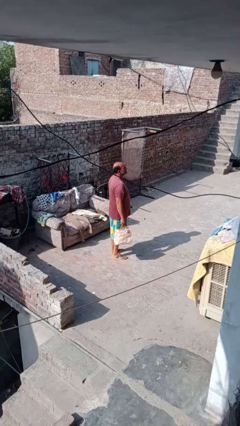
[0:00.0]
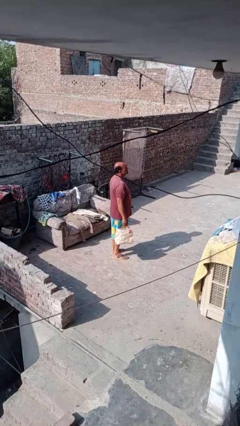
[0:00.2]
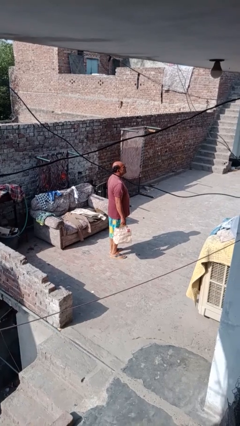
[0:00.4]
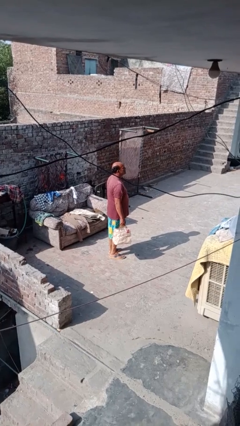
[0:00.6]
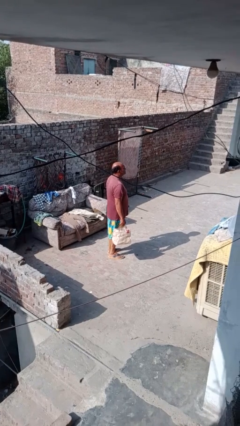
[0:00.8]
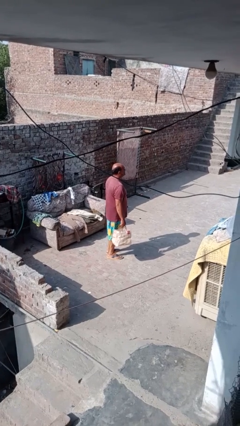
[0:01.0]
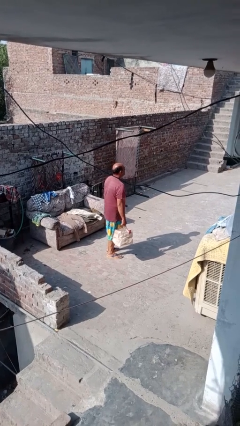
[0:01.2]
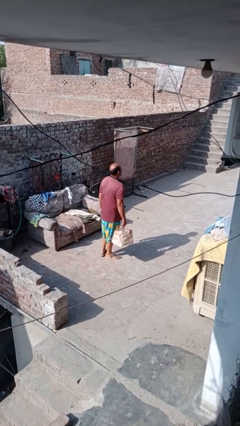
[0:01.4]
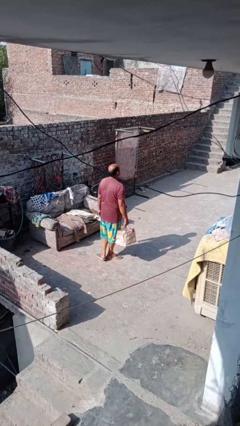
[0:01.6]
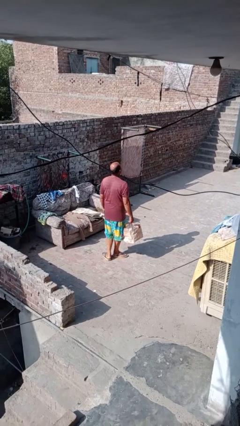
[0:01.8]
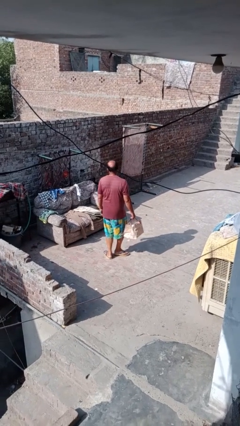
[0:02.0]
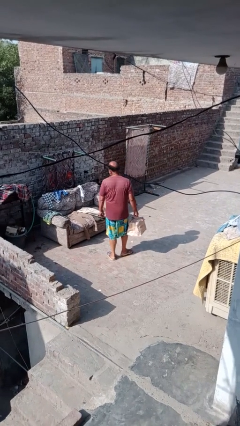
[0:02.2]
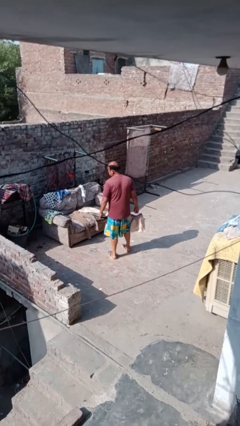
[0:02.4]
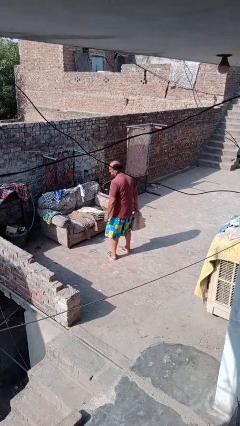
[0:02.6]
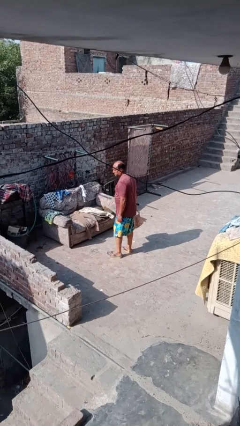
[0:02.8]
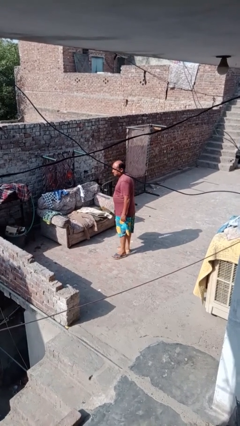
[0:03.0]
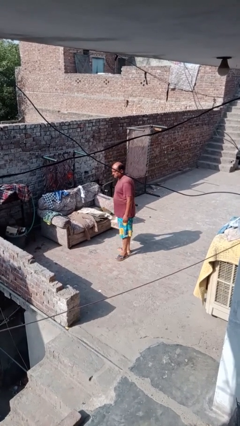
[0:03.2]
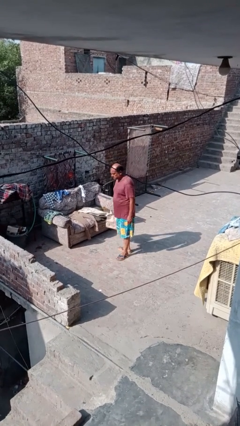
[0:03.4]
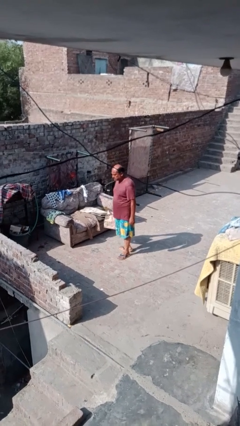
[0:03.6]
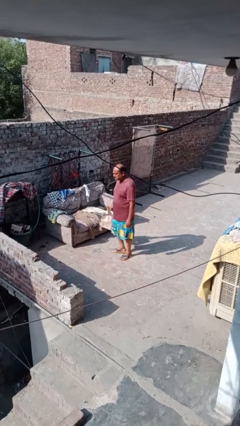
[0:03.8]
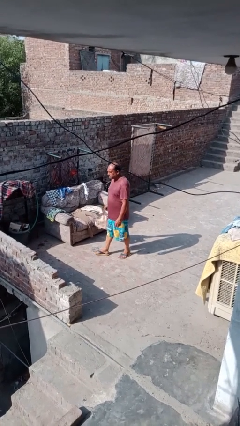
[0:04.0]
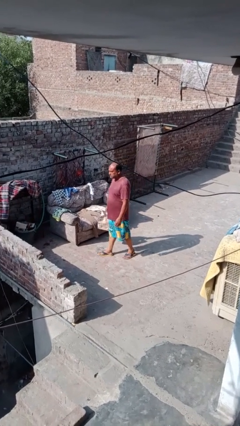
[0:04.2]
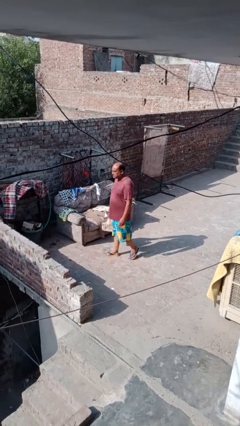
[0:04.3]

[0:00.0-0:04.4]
person carries groceries

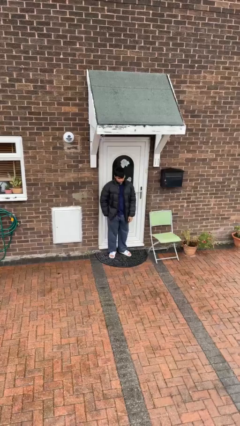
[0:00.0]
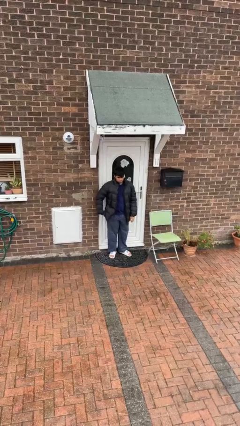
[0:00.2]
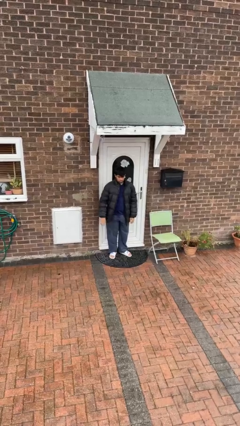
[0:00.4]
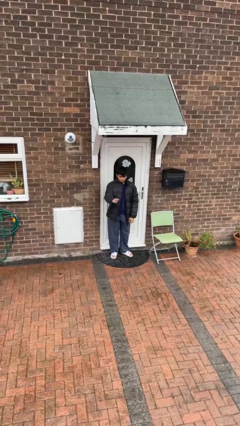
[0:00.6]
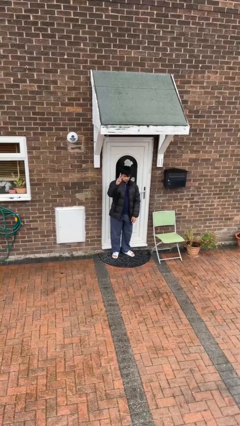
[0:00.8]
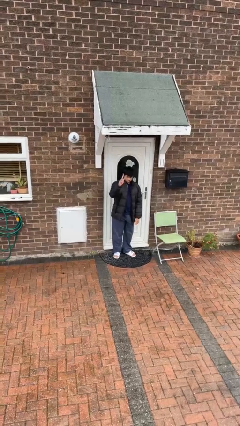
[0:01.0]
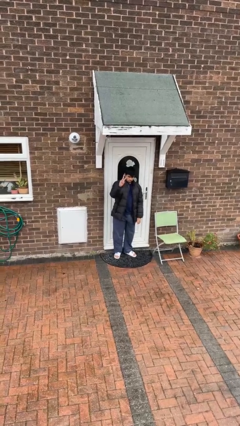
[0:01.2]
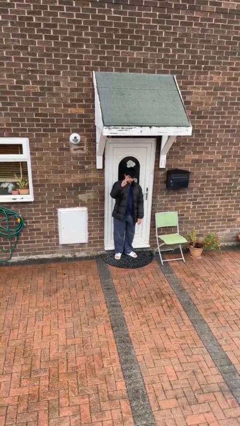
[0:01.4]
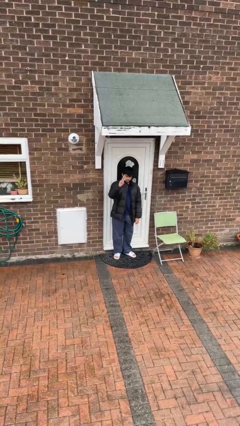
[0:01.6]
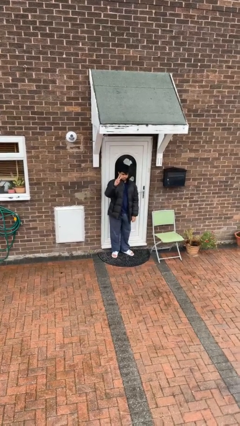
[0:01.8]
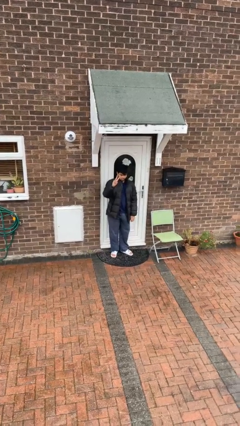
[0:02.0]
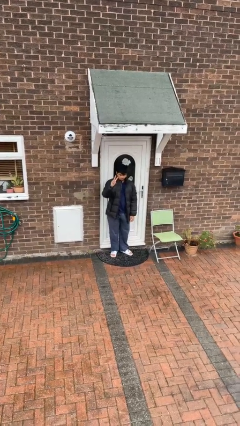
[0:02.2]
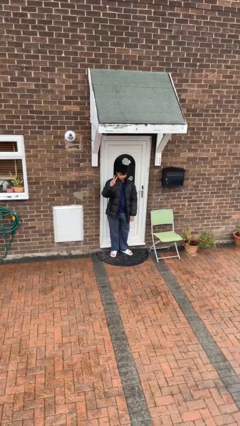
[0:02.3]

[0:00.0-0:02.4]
person gestures peace

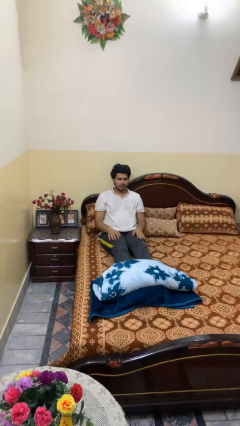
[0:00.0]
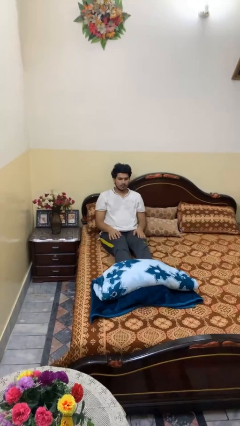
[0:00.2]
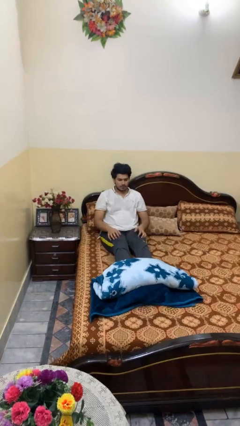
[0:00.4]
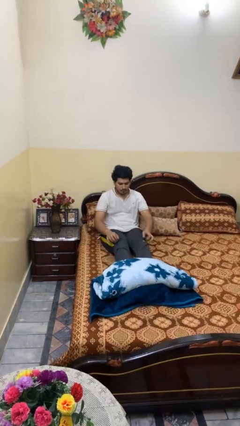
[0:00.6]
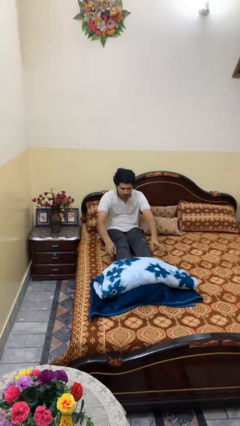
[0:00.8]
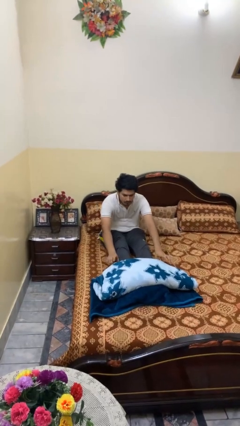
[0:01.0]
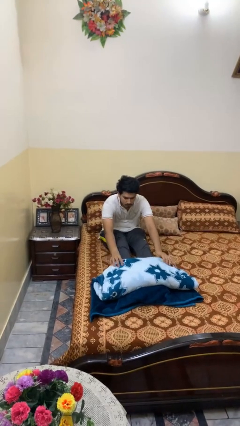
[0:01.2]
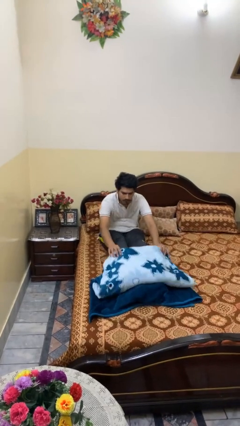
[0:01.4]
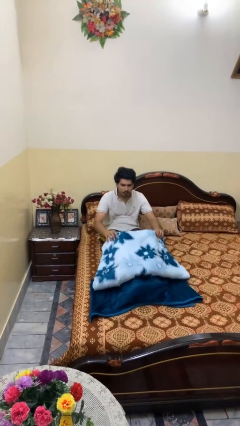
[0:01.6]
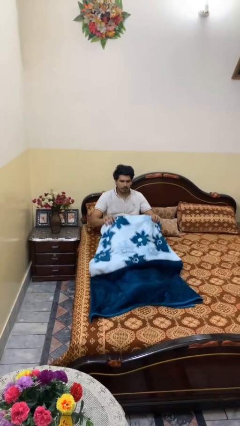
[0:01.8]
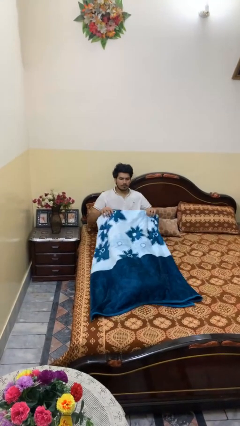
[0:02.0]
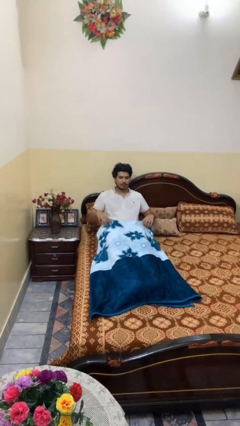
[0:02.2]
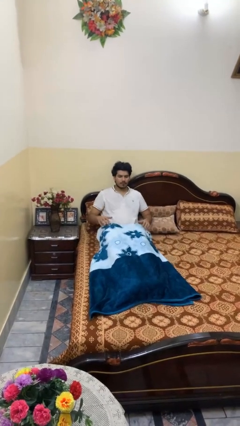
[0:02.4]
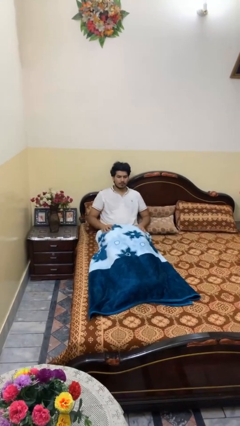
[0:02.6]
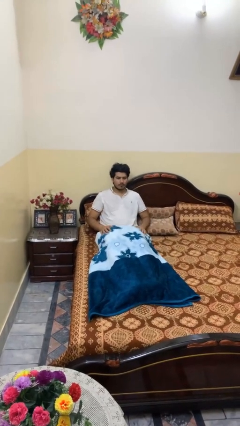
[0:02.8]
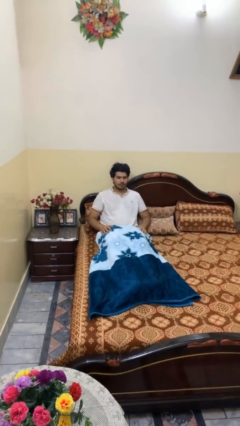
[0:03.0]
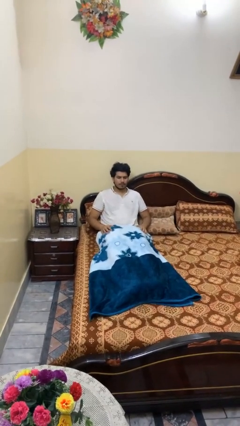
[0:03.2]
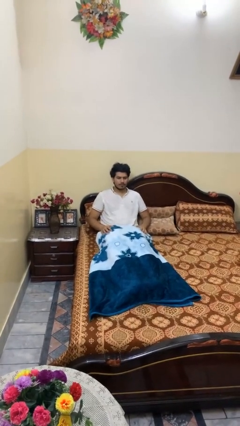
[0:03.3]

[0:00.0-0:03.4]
person covers with blanket

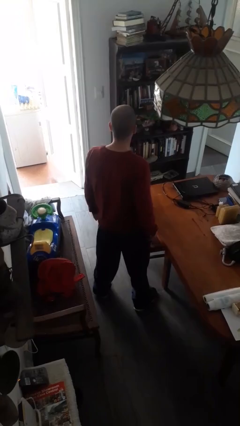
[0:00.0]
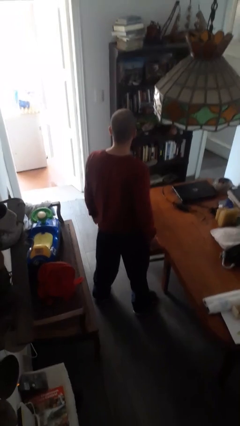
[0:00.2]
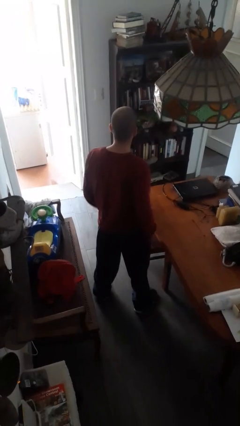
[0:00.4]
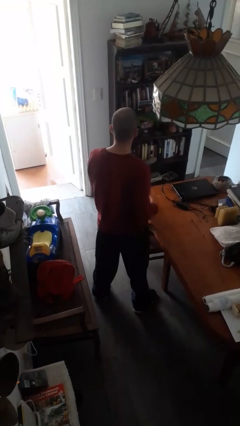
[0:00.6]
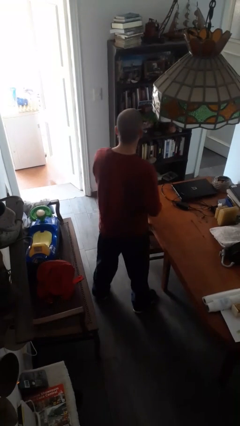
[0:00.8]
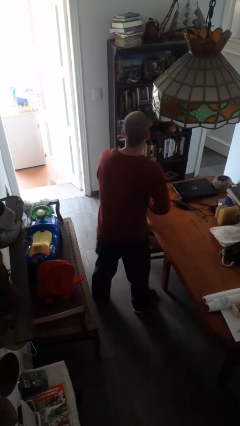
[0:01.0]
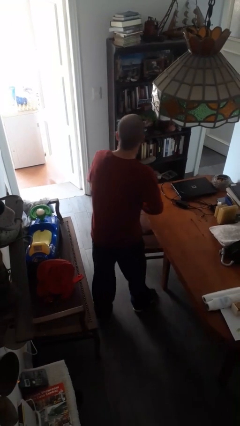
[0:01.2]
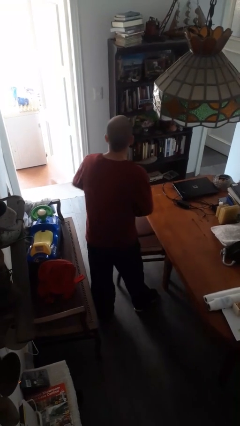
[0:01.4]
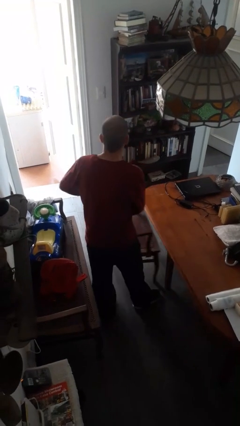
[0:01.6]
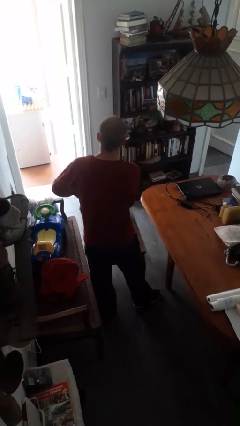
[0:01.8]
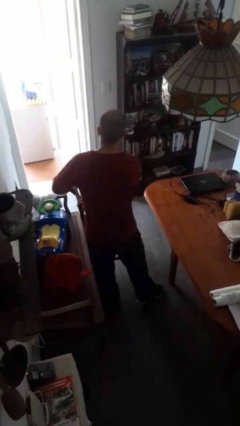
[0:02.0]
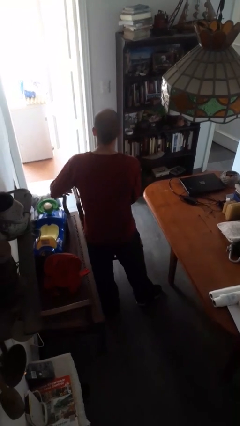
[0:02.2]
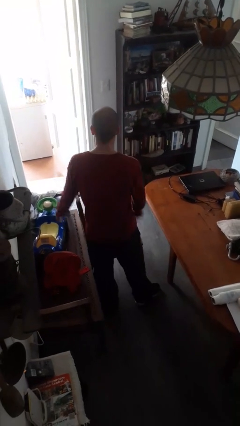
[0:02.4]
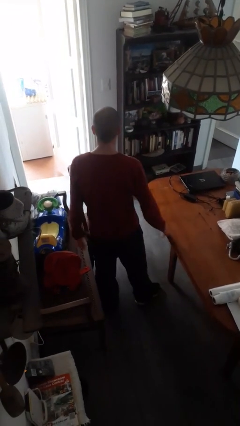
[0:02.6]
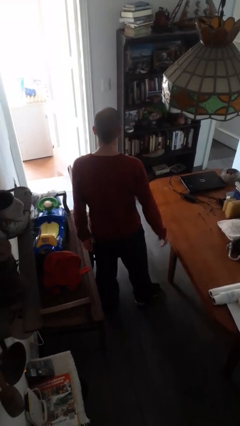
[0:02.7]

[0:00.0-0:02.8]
person pulls out chair

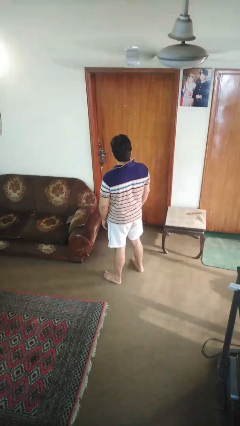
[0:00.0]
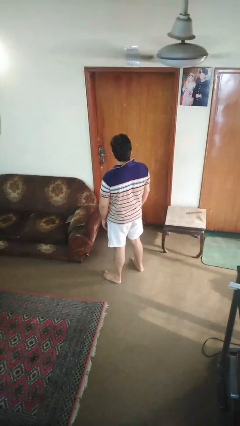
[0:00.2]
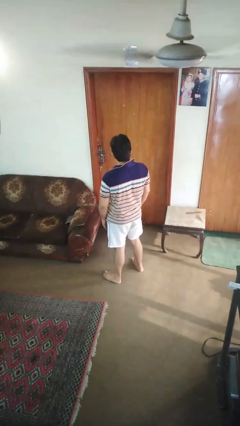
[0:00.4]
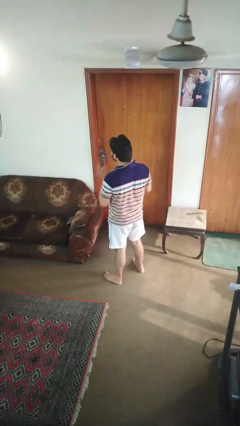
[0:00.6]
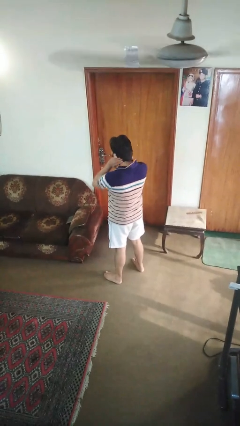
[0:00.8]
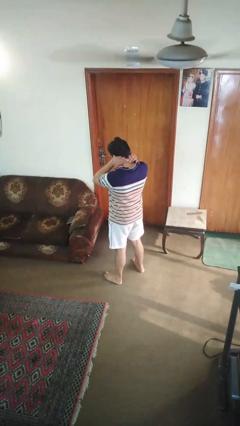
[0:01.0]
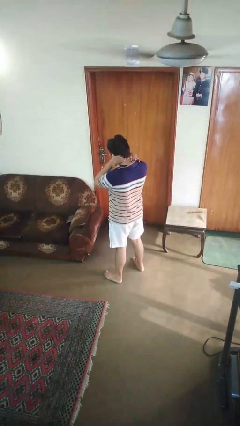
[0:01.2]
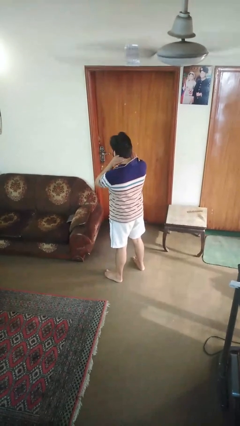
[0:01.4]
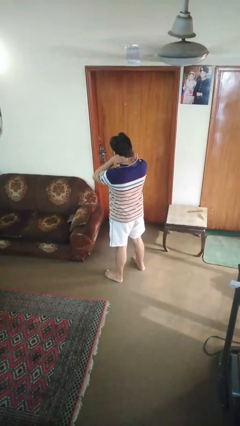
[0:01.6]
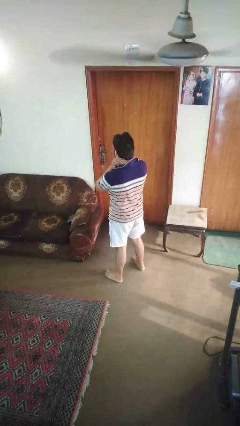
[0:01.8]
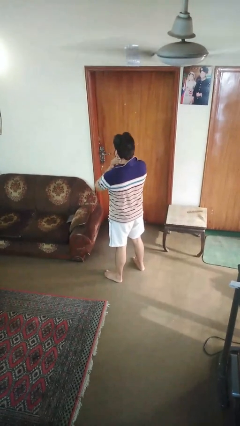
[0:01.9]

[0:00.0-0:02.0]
person rubs neck

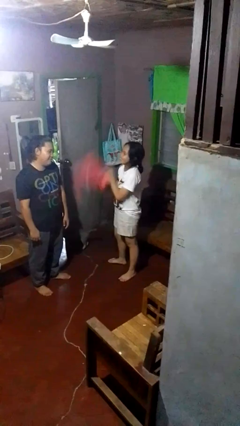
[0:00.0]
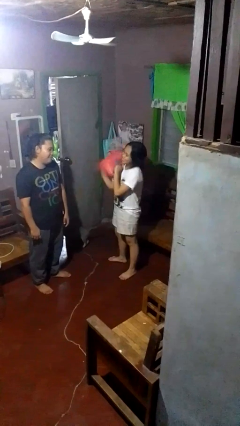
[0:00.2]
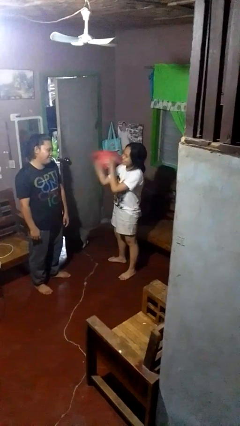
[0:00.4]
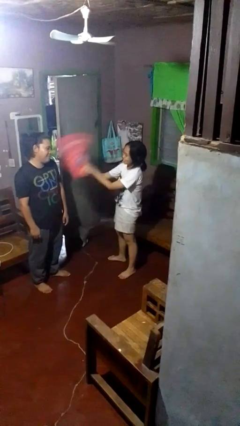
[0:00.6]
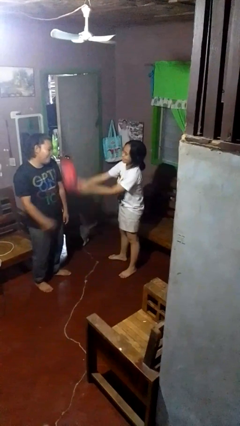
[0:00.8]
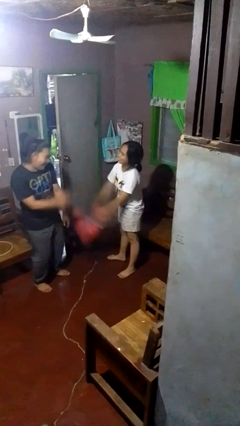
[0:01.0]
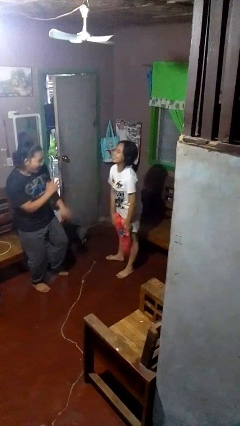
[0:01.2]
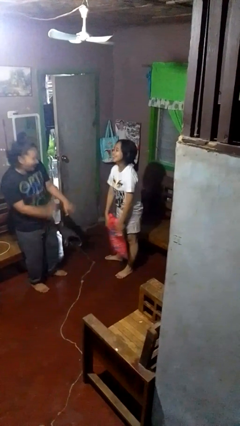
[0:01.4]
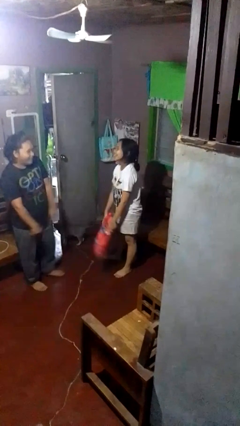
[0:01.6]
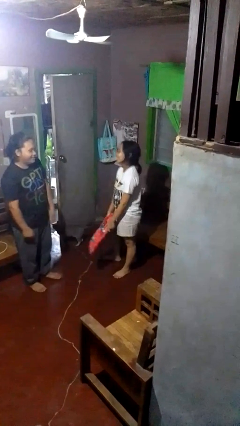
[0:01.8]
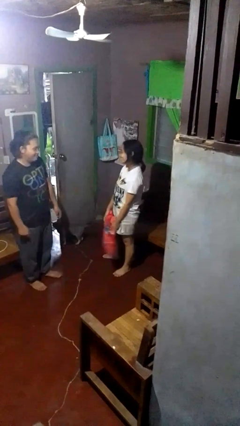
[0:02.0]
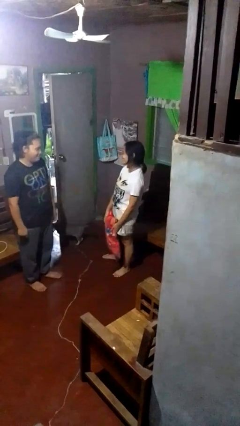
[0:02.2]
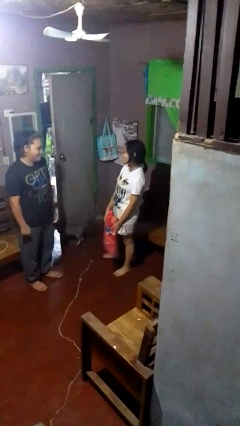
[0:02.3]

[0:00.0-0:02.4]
person hits person with pillow
